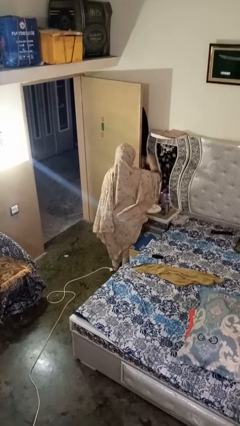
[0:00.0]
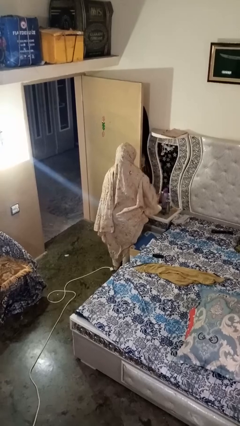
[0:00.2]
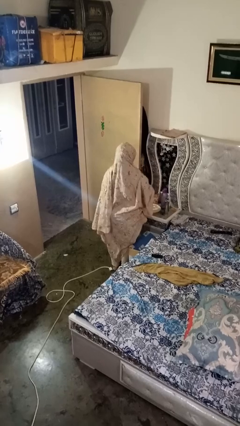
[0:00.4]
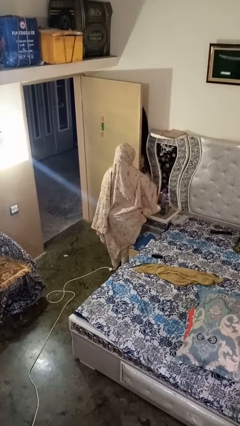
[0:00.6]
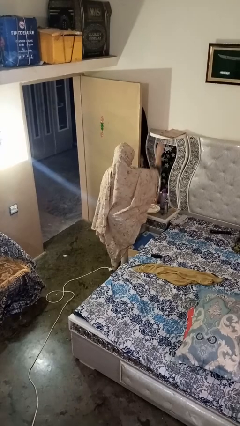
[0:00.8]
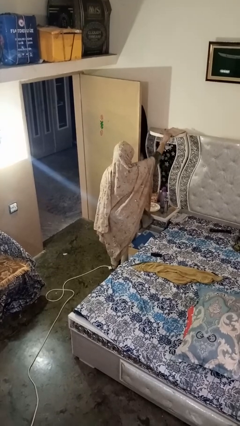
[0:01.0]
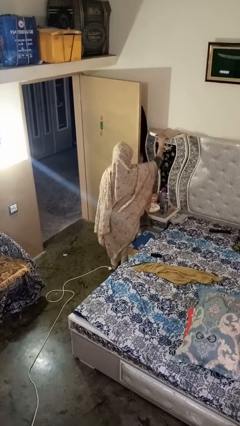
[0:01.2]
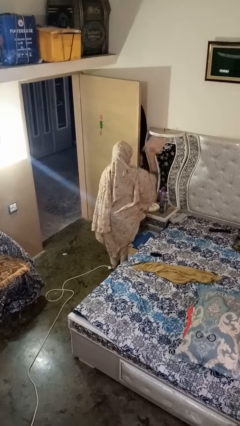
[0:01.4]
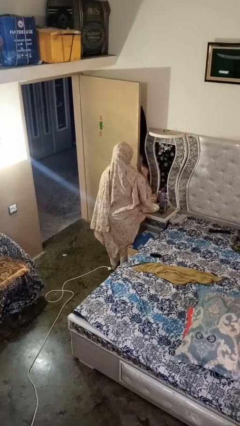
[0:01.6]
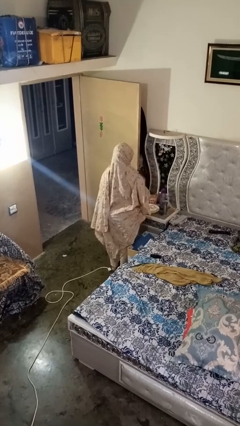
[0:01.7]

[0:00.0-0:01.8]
person picks up object from shelf

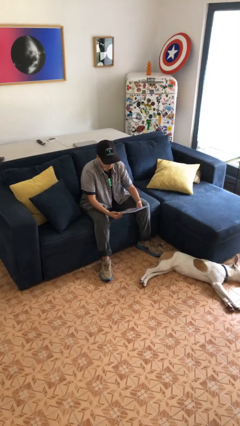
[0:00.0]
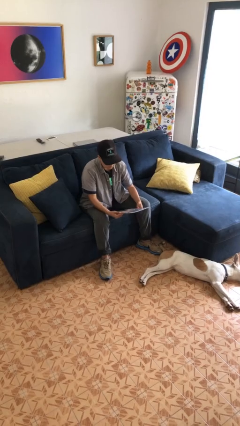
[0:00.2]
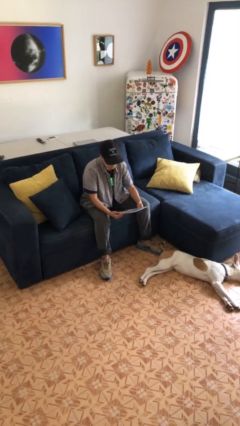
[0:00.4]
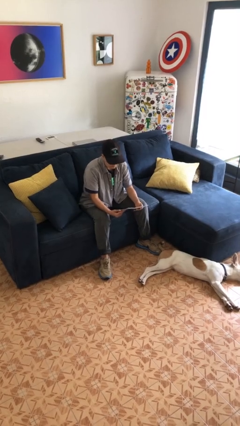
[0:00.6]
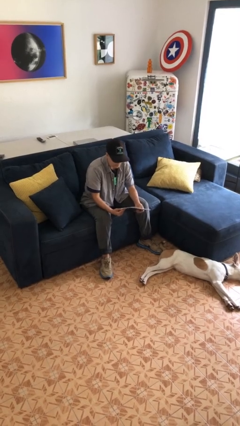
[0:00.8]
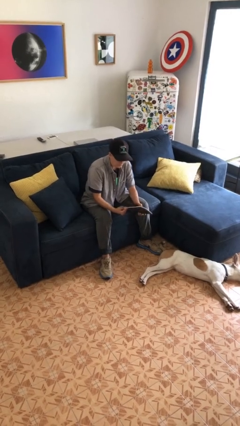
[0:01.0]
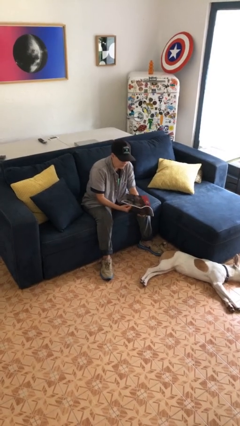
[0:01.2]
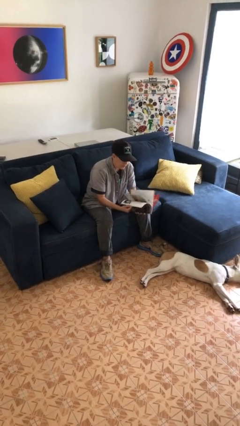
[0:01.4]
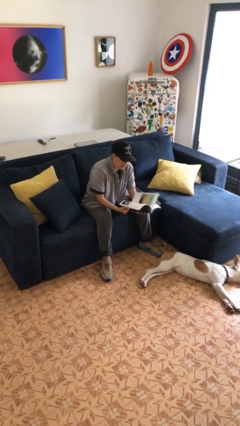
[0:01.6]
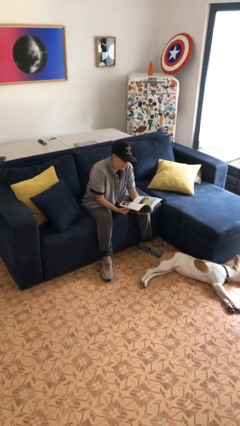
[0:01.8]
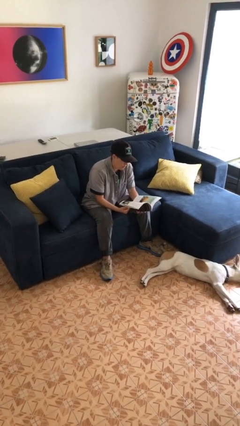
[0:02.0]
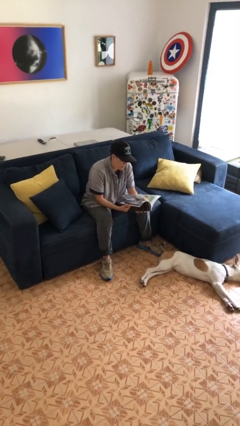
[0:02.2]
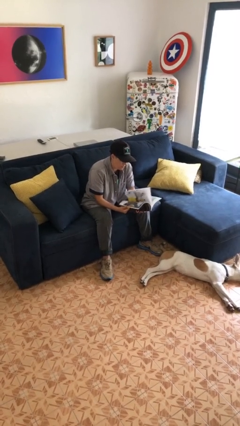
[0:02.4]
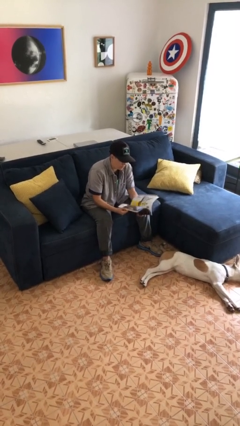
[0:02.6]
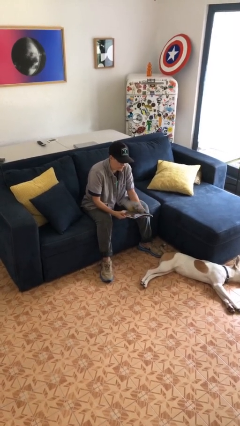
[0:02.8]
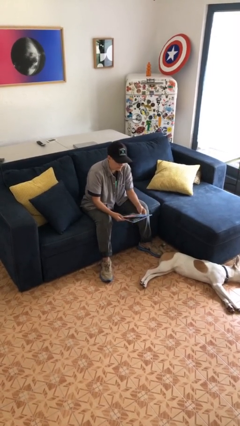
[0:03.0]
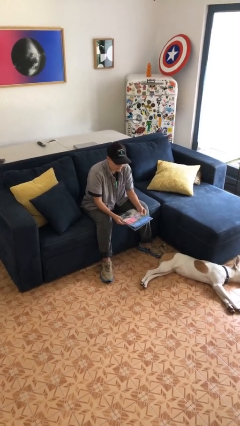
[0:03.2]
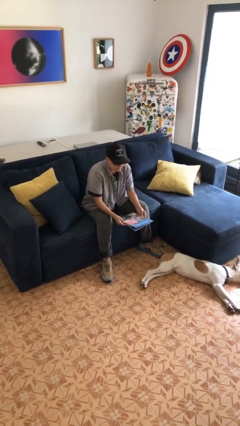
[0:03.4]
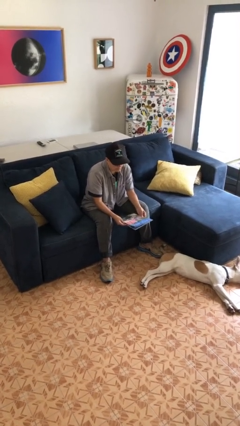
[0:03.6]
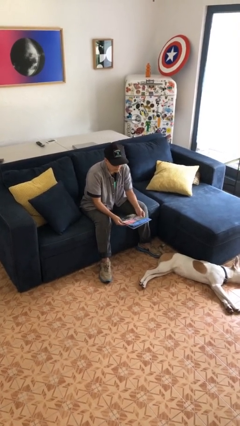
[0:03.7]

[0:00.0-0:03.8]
person reads magazine

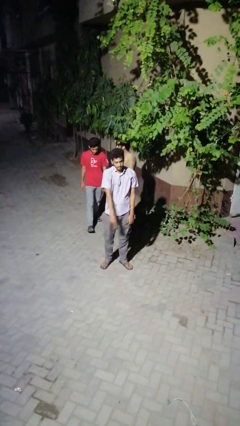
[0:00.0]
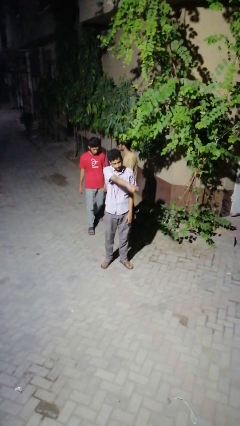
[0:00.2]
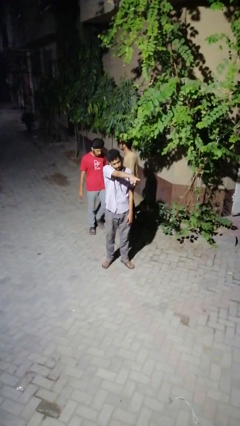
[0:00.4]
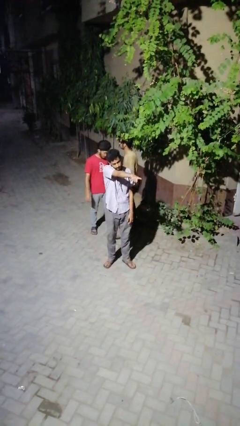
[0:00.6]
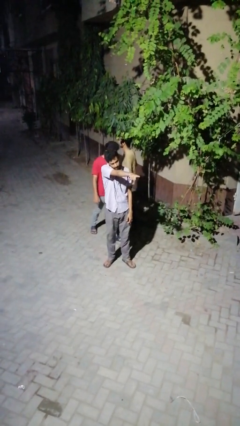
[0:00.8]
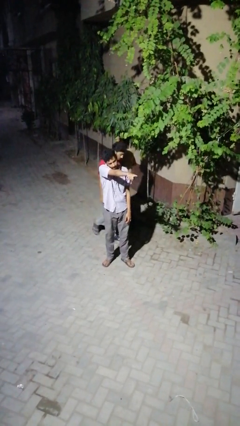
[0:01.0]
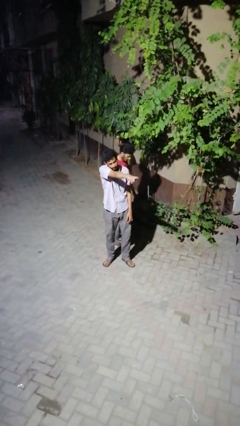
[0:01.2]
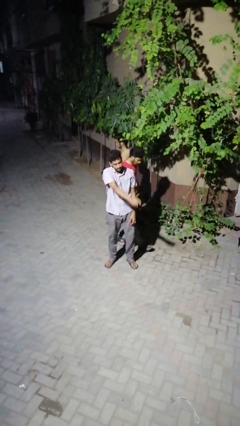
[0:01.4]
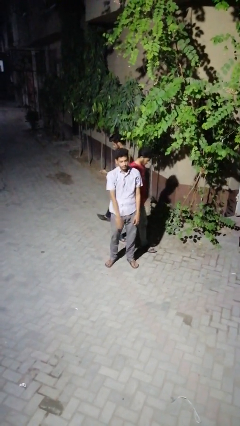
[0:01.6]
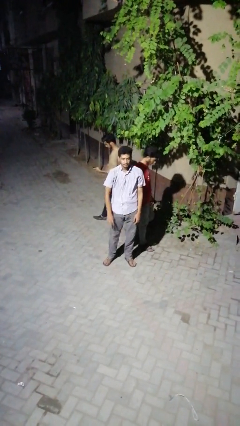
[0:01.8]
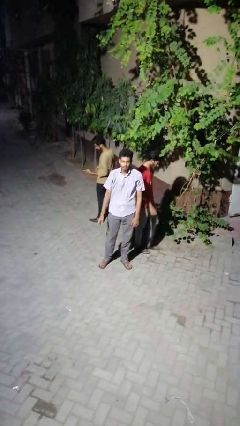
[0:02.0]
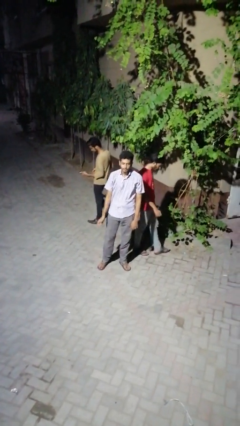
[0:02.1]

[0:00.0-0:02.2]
person points at person

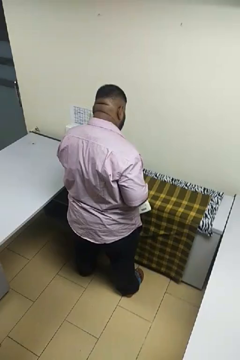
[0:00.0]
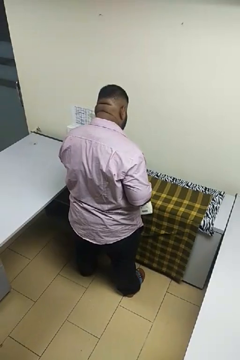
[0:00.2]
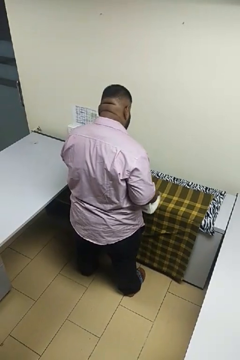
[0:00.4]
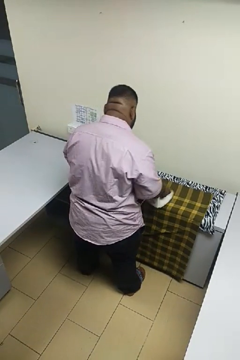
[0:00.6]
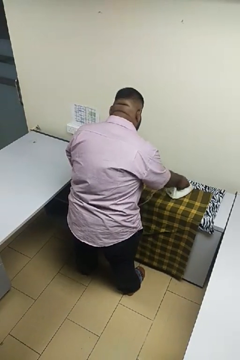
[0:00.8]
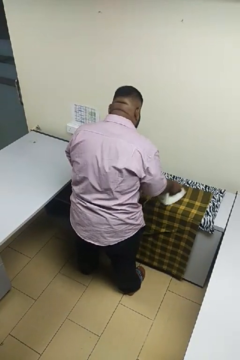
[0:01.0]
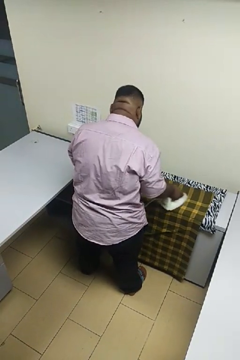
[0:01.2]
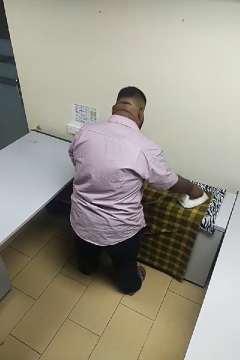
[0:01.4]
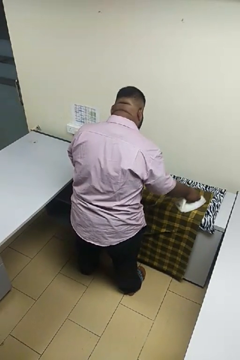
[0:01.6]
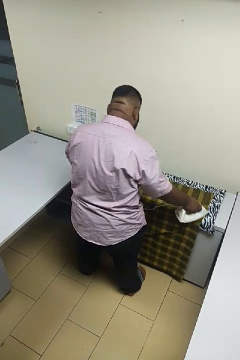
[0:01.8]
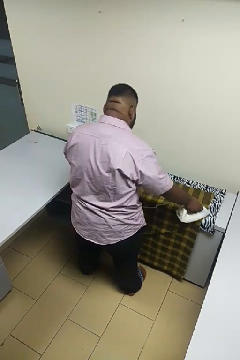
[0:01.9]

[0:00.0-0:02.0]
person irons clothes

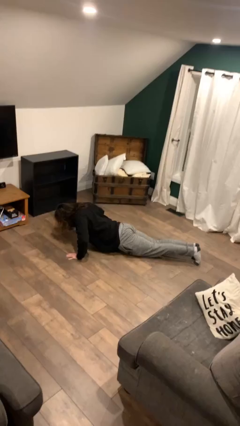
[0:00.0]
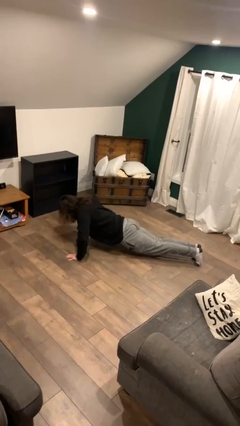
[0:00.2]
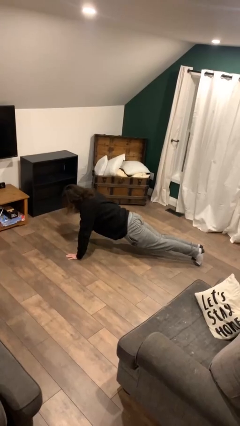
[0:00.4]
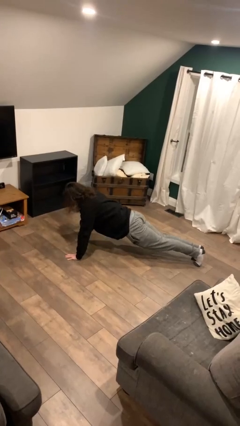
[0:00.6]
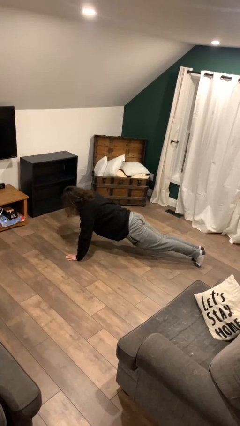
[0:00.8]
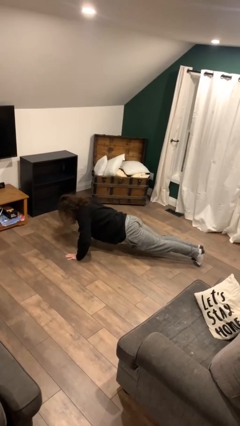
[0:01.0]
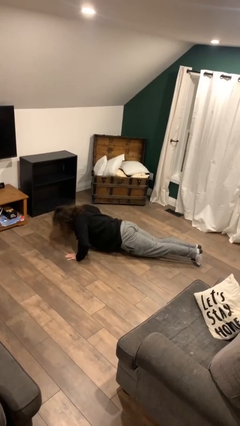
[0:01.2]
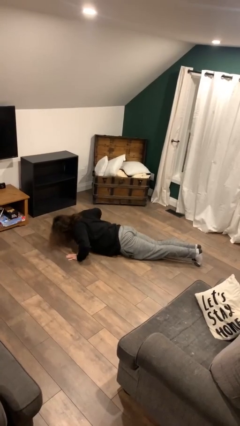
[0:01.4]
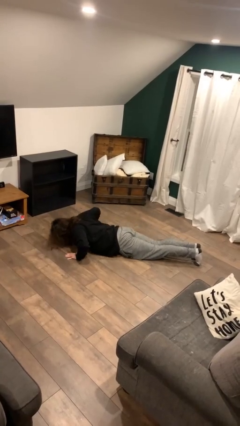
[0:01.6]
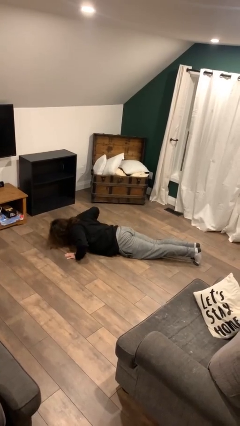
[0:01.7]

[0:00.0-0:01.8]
person exercises with pushup

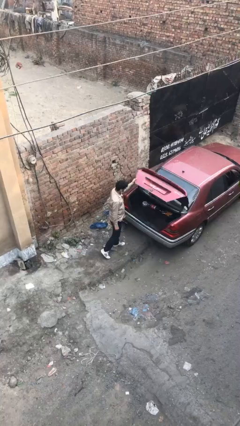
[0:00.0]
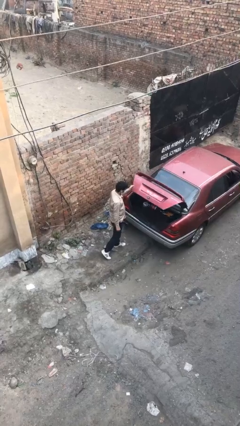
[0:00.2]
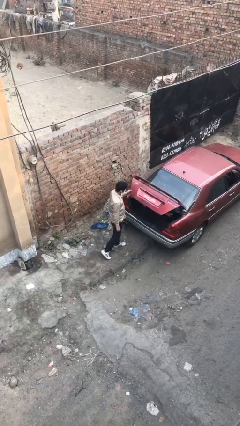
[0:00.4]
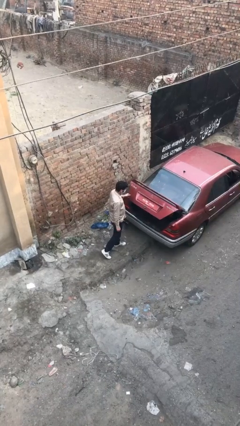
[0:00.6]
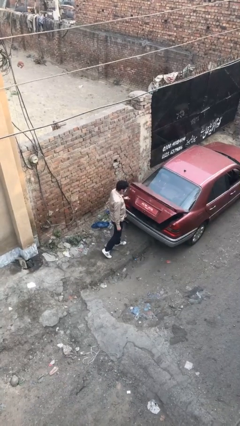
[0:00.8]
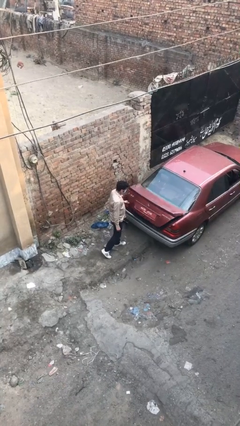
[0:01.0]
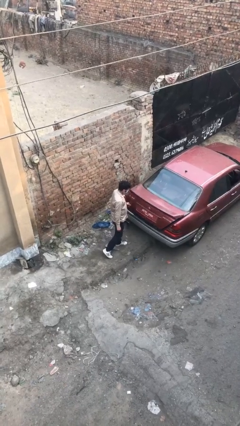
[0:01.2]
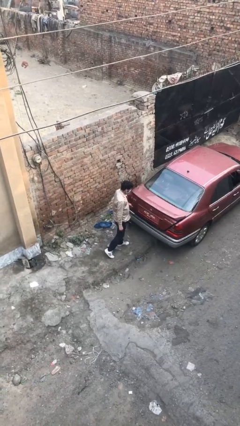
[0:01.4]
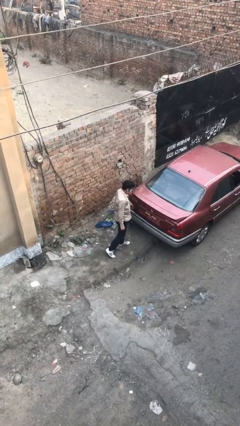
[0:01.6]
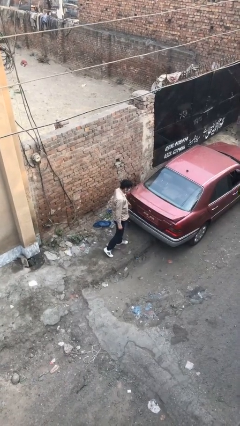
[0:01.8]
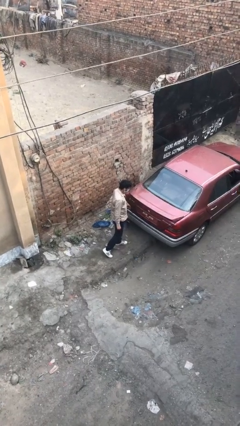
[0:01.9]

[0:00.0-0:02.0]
person closes car trunk

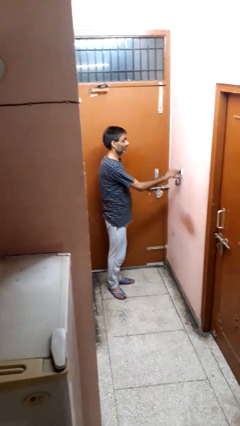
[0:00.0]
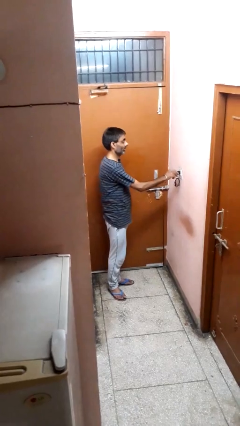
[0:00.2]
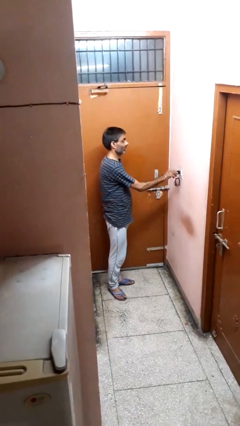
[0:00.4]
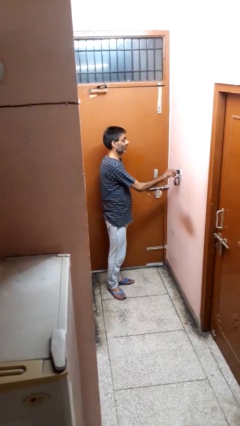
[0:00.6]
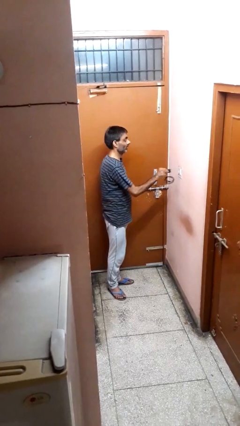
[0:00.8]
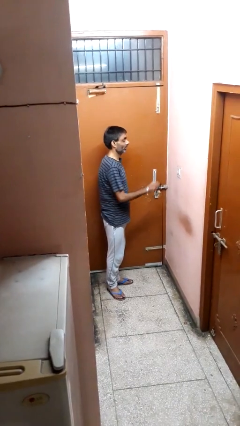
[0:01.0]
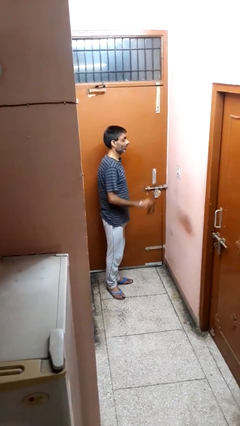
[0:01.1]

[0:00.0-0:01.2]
person unplugs from electrical socket

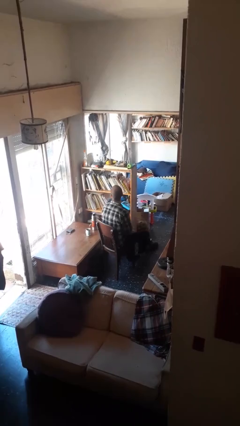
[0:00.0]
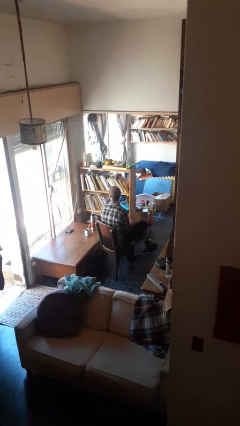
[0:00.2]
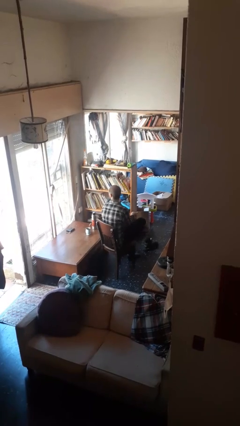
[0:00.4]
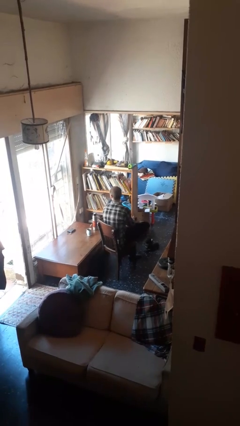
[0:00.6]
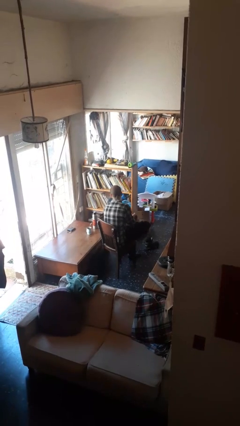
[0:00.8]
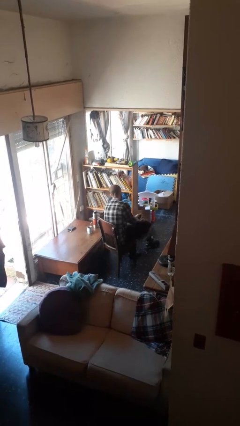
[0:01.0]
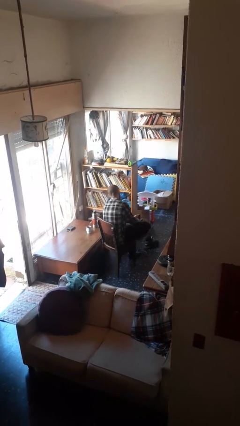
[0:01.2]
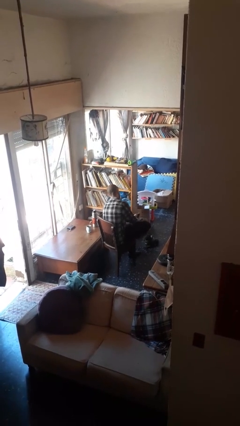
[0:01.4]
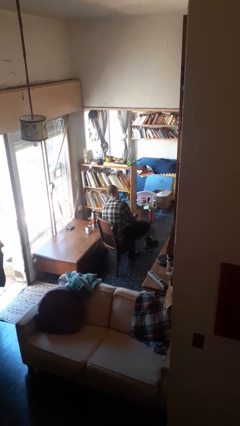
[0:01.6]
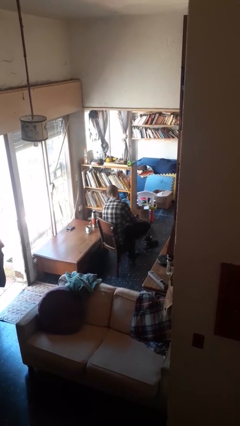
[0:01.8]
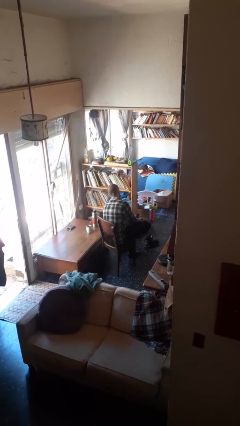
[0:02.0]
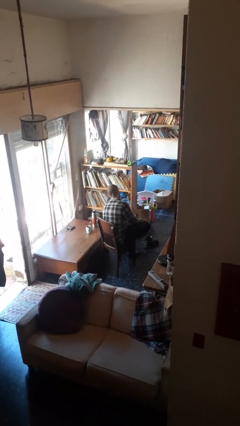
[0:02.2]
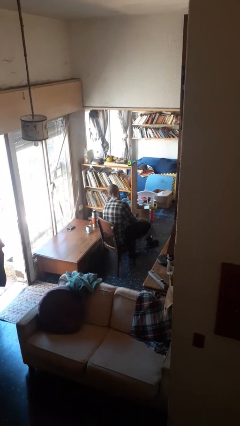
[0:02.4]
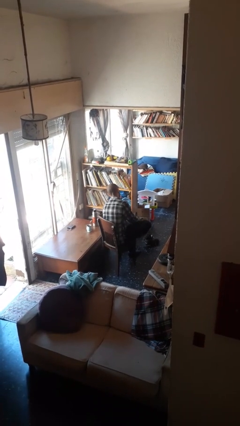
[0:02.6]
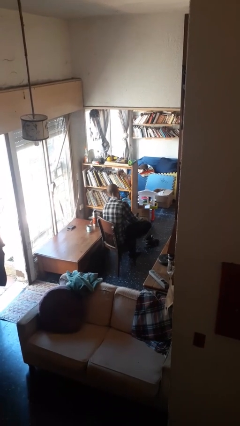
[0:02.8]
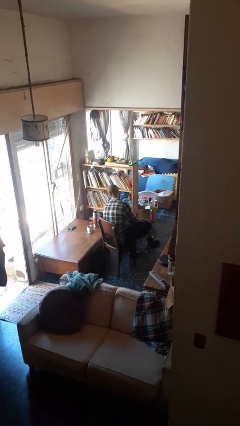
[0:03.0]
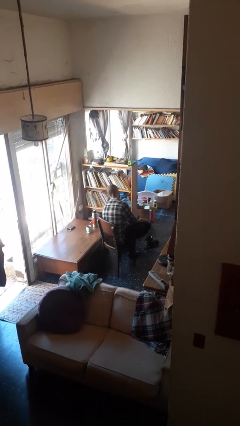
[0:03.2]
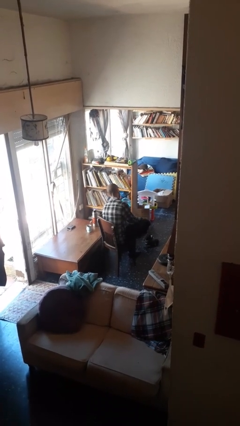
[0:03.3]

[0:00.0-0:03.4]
person rubs foot
